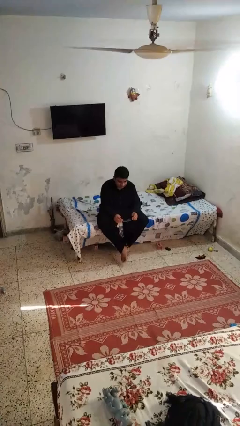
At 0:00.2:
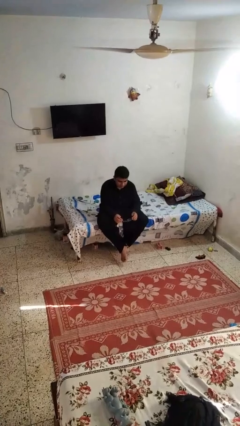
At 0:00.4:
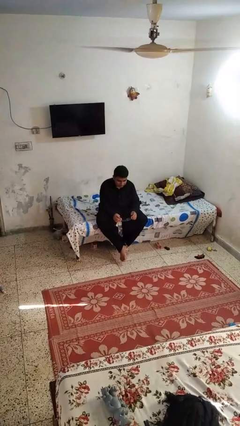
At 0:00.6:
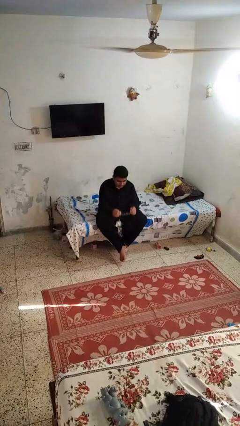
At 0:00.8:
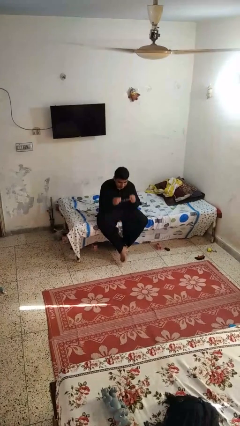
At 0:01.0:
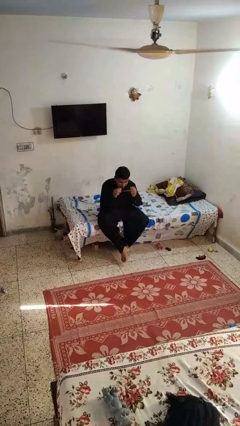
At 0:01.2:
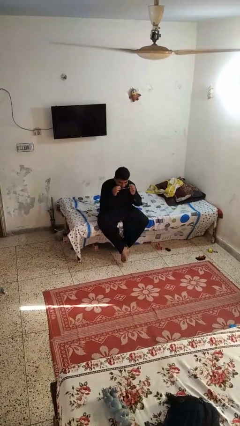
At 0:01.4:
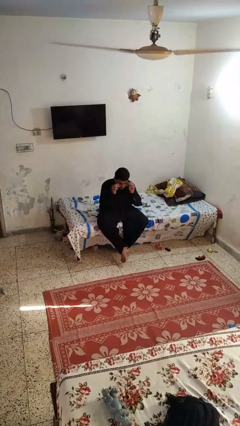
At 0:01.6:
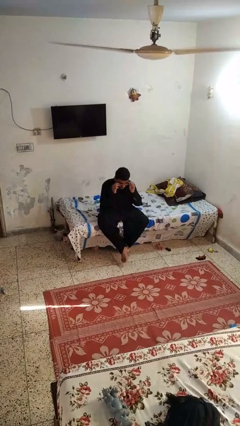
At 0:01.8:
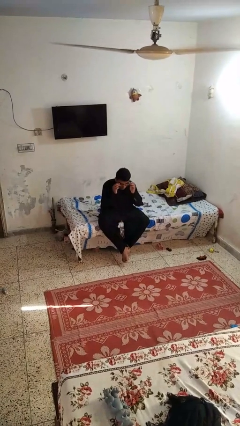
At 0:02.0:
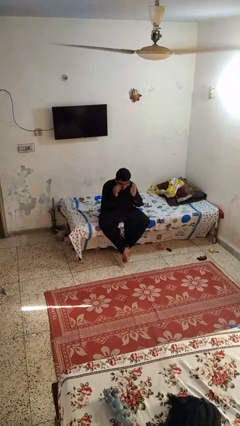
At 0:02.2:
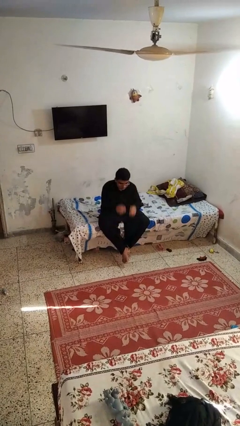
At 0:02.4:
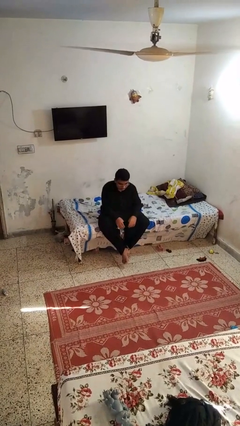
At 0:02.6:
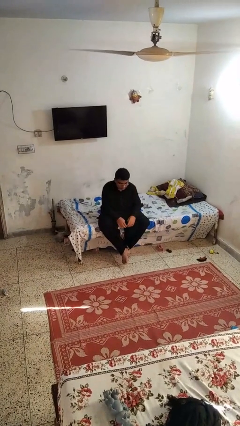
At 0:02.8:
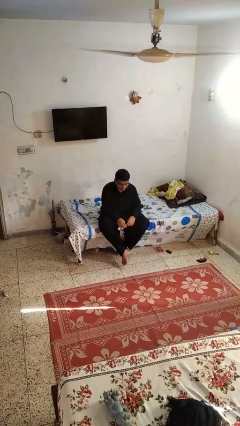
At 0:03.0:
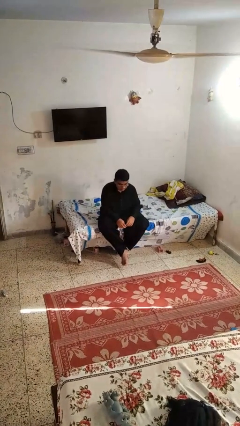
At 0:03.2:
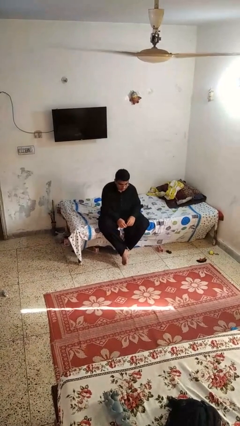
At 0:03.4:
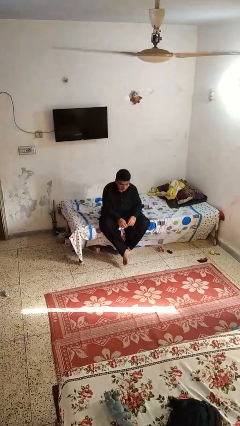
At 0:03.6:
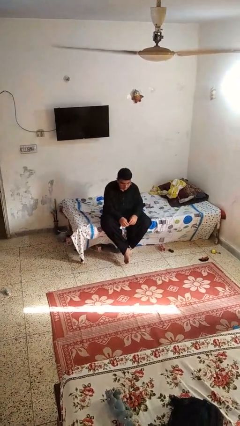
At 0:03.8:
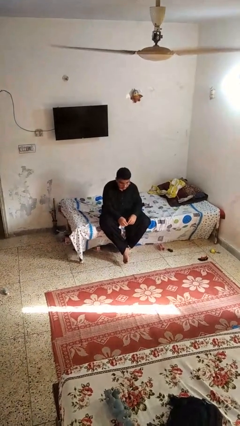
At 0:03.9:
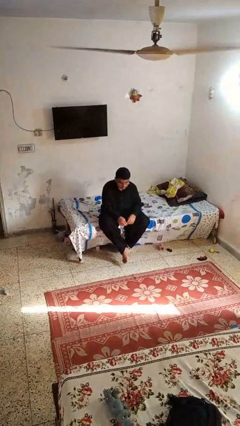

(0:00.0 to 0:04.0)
person puts on glasses

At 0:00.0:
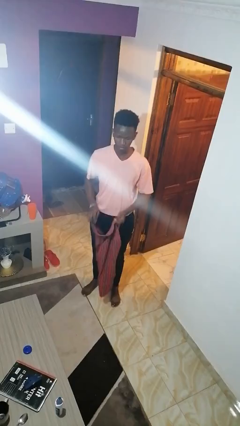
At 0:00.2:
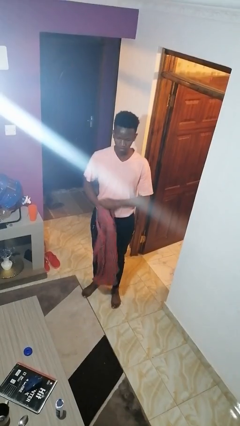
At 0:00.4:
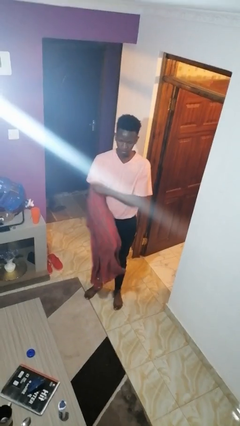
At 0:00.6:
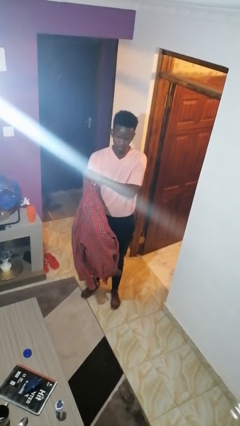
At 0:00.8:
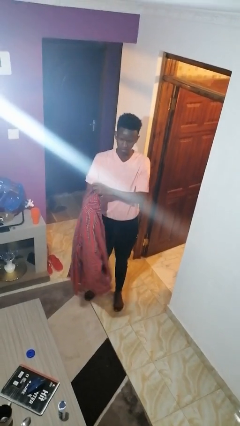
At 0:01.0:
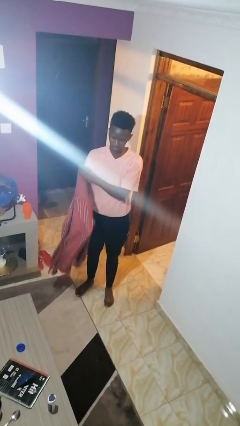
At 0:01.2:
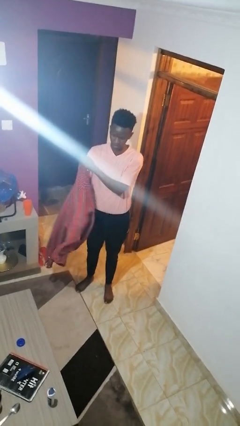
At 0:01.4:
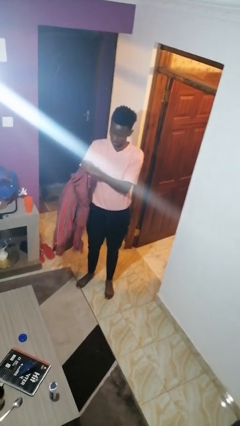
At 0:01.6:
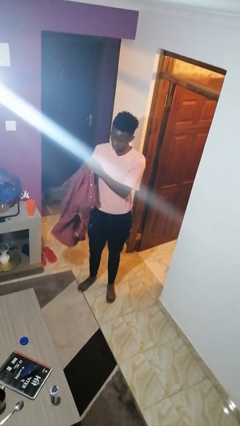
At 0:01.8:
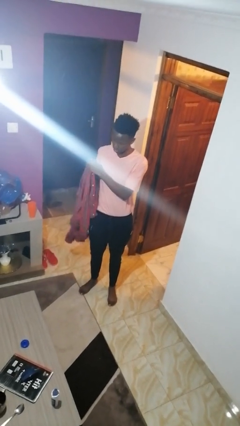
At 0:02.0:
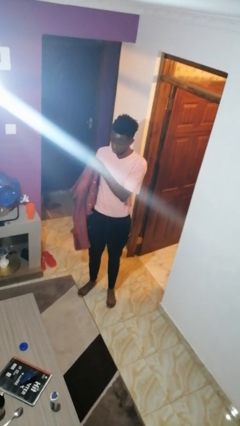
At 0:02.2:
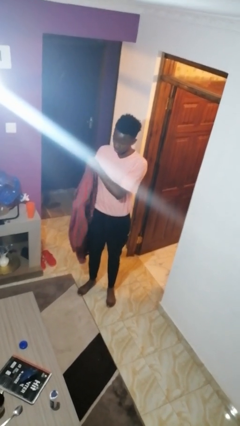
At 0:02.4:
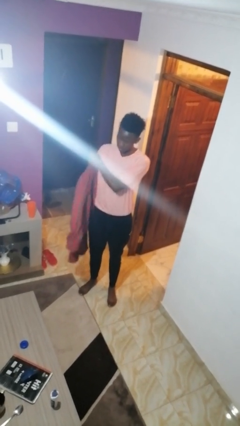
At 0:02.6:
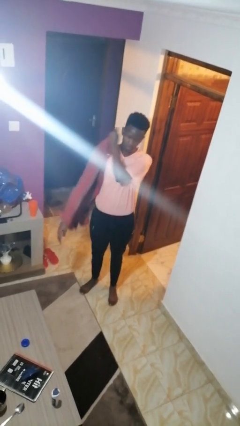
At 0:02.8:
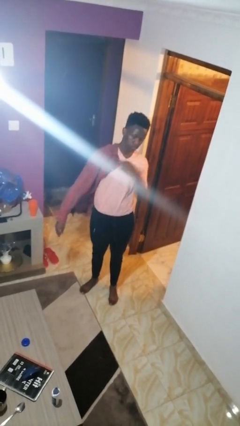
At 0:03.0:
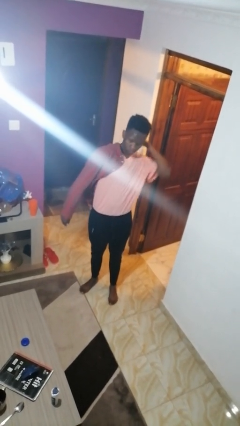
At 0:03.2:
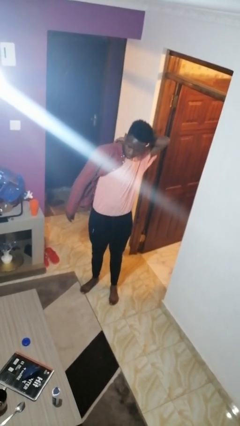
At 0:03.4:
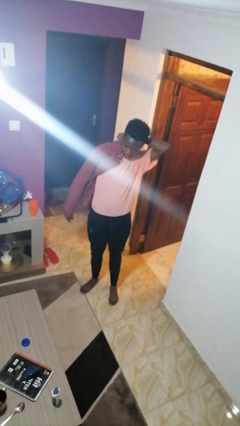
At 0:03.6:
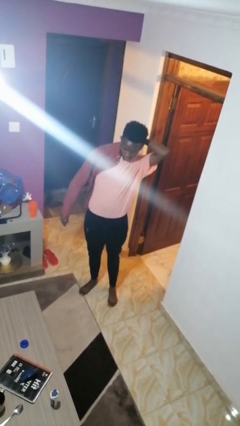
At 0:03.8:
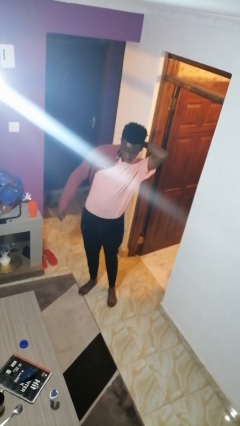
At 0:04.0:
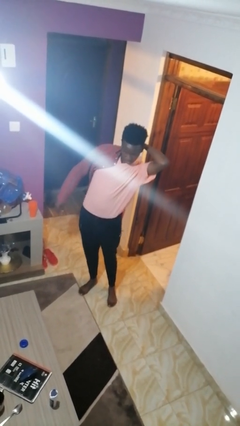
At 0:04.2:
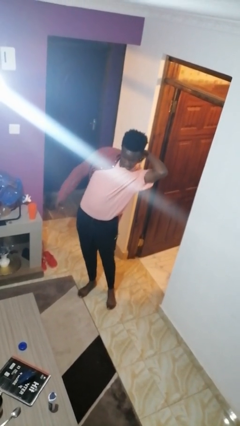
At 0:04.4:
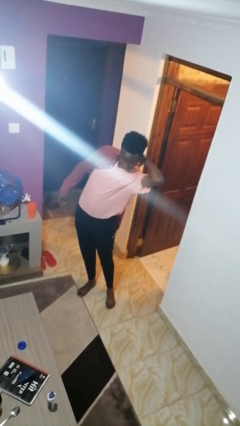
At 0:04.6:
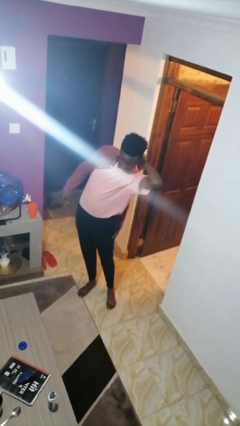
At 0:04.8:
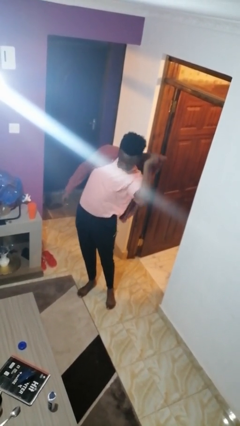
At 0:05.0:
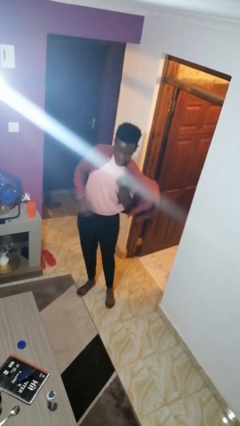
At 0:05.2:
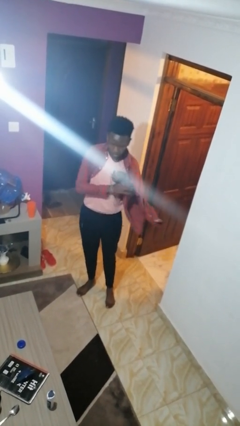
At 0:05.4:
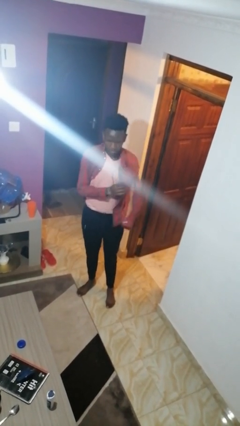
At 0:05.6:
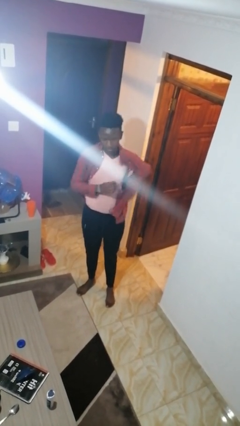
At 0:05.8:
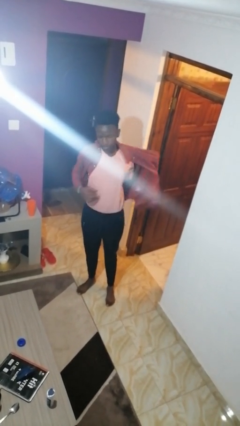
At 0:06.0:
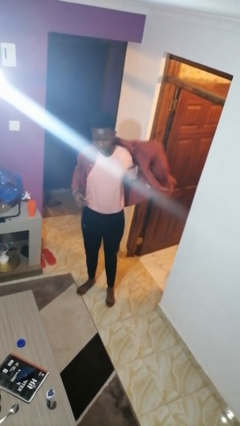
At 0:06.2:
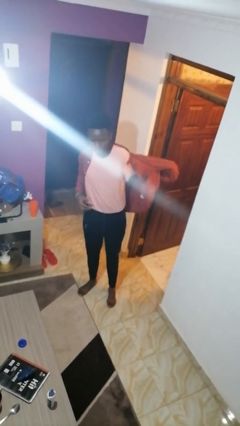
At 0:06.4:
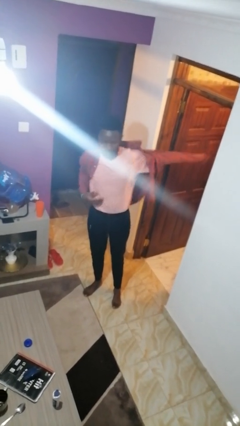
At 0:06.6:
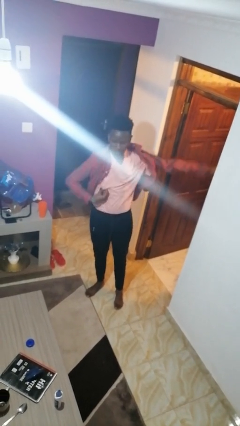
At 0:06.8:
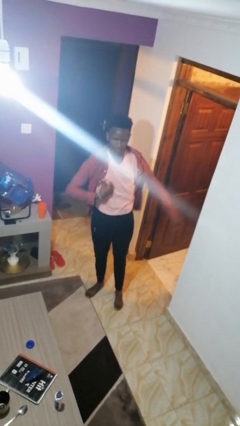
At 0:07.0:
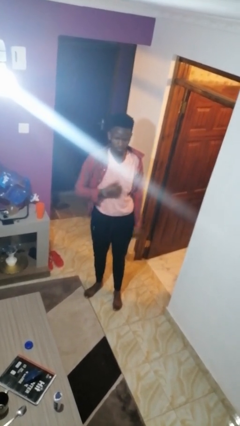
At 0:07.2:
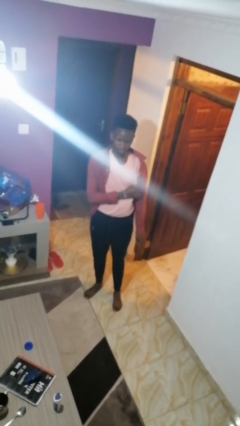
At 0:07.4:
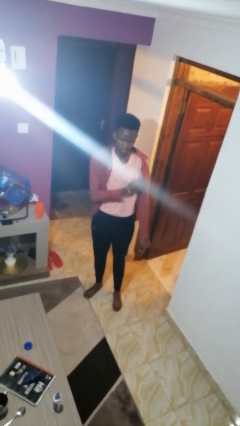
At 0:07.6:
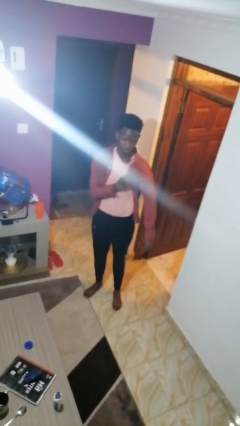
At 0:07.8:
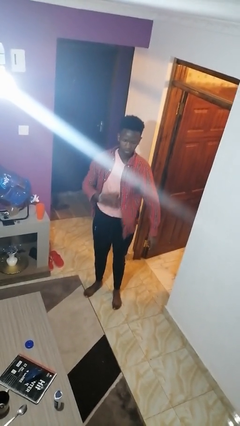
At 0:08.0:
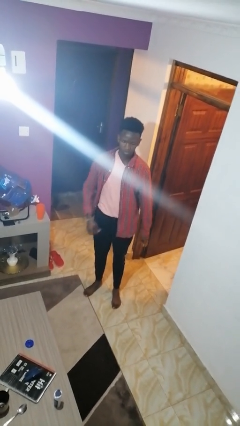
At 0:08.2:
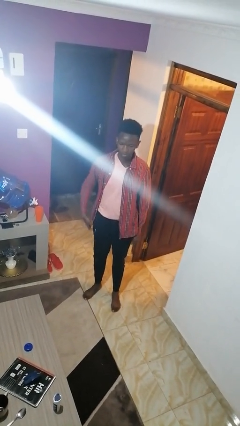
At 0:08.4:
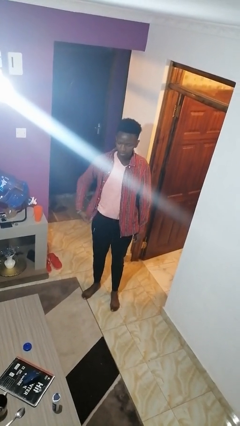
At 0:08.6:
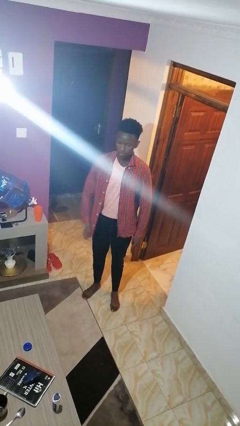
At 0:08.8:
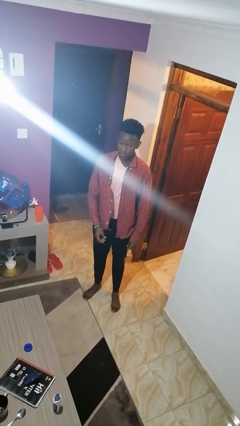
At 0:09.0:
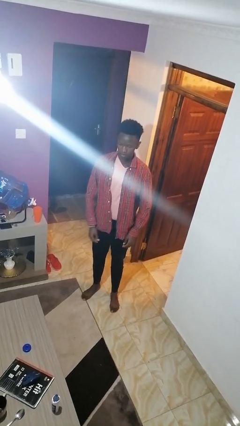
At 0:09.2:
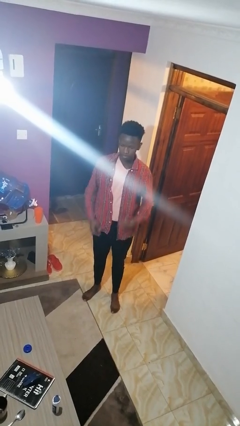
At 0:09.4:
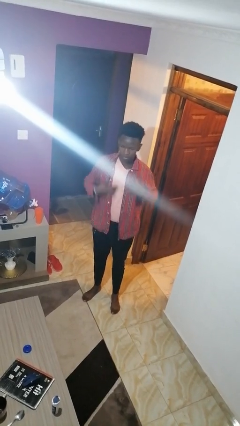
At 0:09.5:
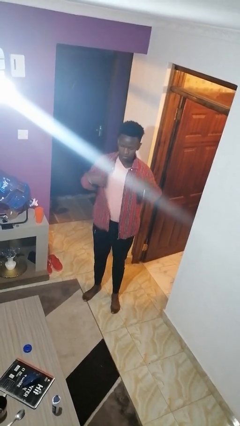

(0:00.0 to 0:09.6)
person puts on shirt

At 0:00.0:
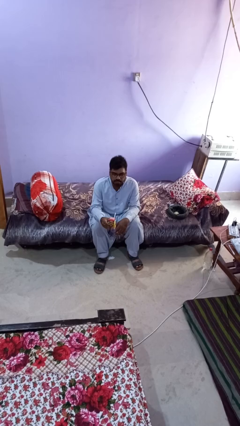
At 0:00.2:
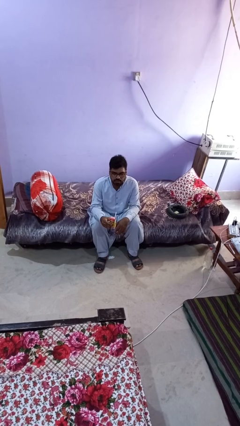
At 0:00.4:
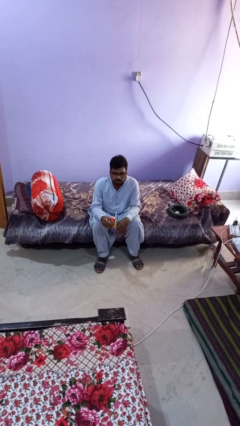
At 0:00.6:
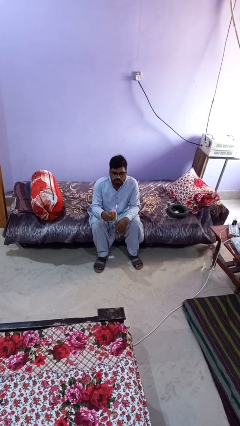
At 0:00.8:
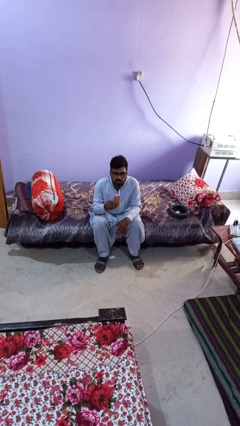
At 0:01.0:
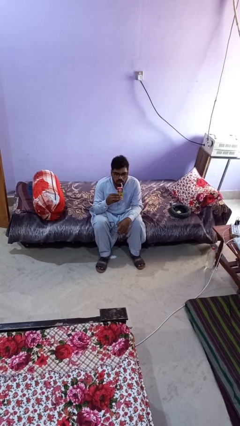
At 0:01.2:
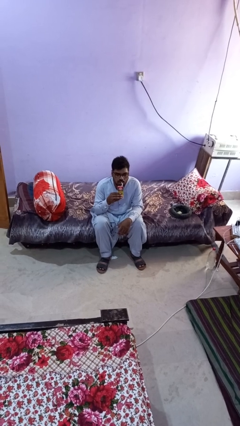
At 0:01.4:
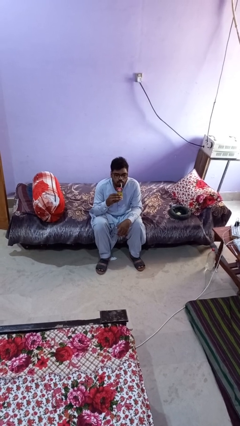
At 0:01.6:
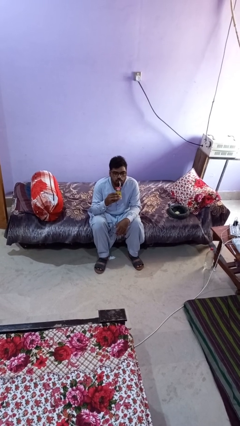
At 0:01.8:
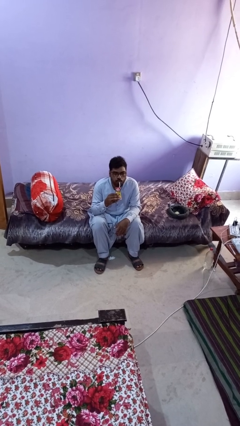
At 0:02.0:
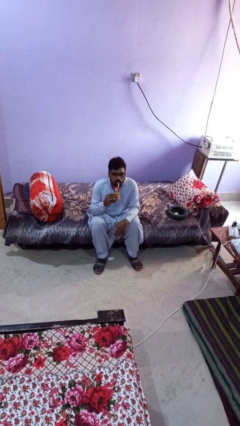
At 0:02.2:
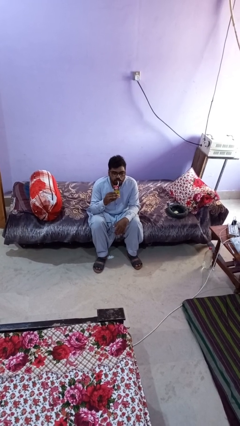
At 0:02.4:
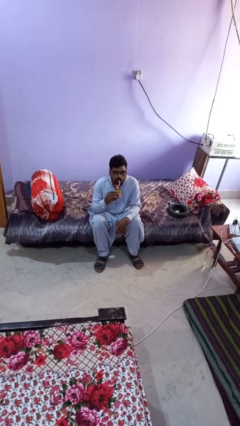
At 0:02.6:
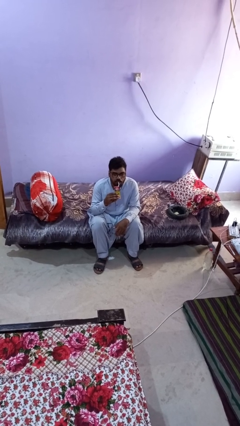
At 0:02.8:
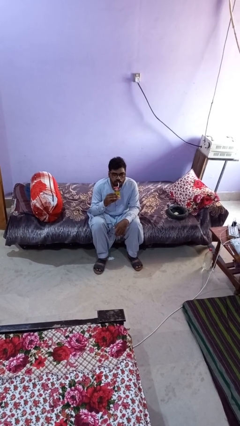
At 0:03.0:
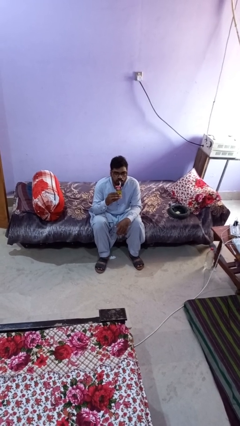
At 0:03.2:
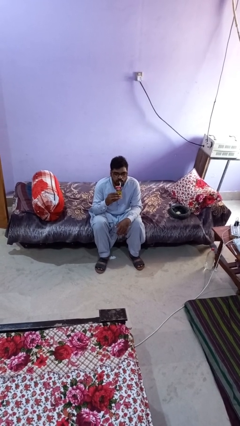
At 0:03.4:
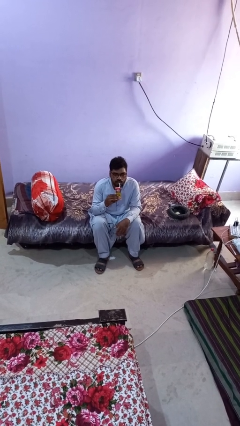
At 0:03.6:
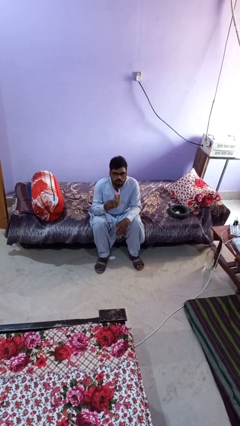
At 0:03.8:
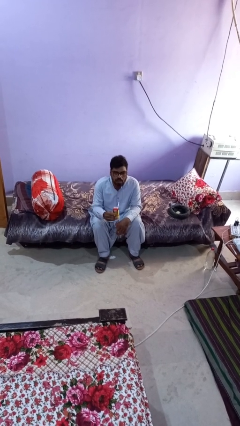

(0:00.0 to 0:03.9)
person drinks from straw

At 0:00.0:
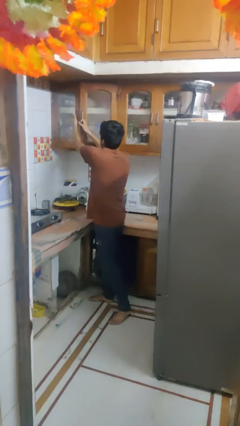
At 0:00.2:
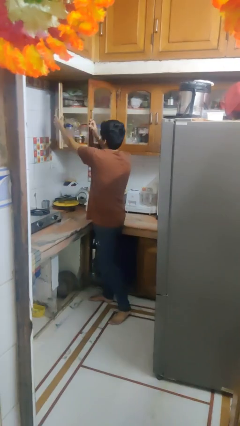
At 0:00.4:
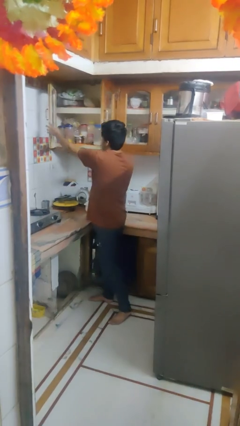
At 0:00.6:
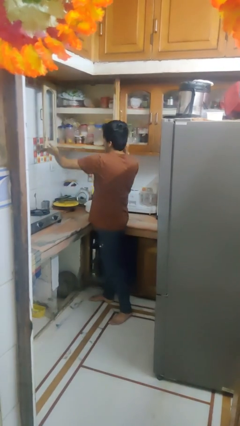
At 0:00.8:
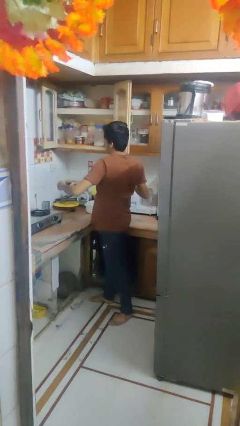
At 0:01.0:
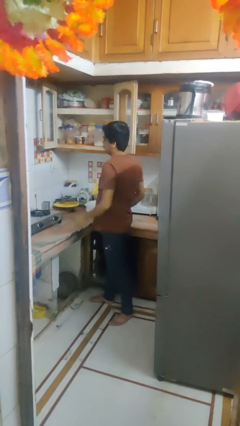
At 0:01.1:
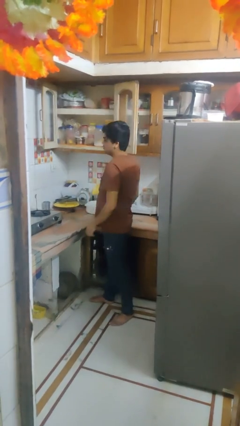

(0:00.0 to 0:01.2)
person opens cabinet
